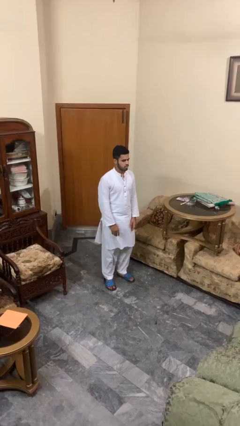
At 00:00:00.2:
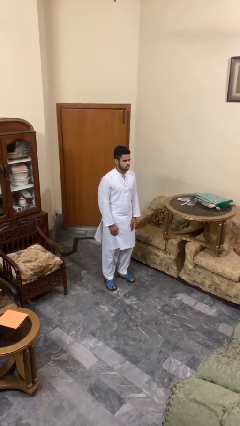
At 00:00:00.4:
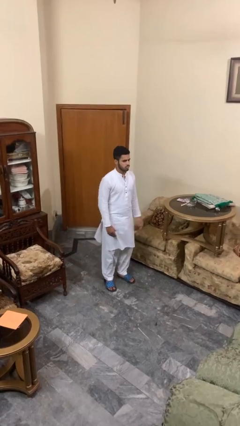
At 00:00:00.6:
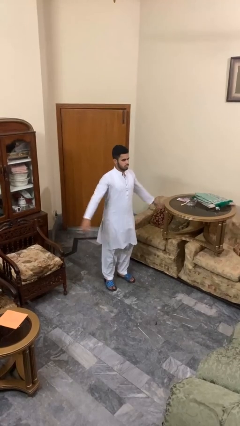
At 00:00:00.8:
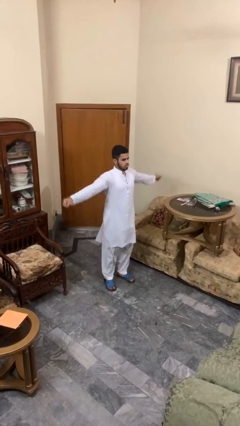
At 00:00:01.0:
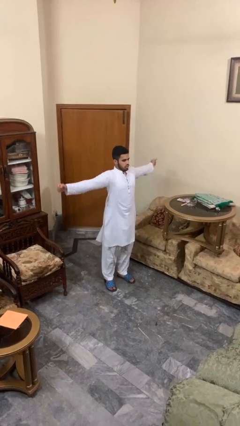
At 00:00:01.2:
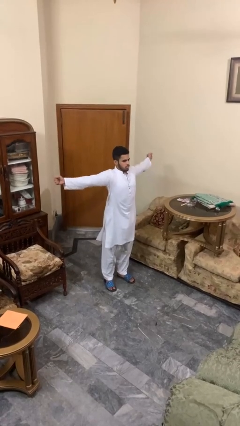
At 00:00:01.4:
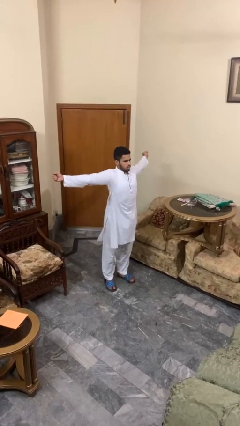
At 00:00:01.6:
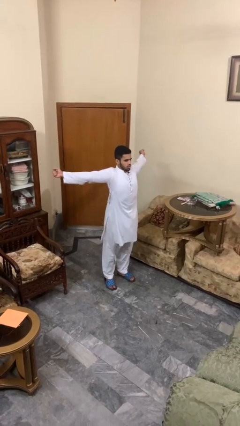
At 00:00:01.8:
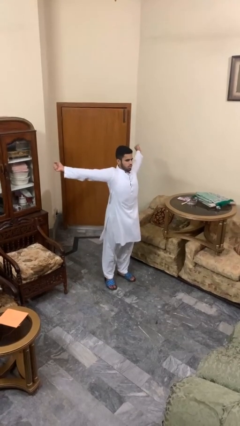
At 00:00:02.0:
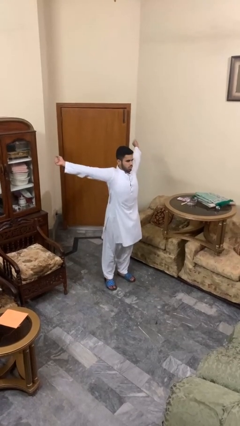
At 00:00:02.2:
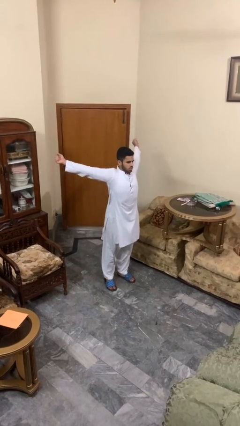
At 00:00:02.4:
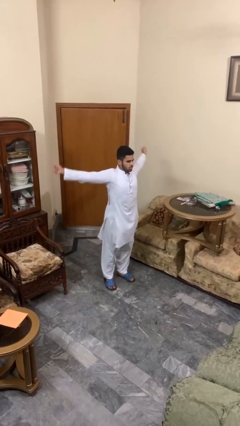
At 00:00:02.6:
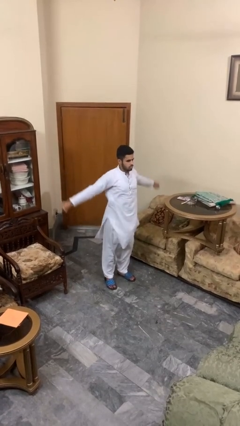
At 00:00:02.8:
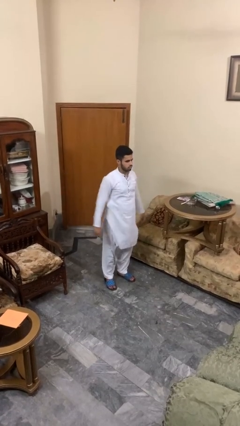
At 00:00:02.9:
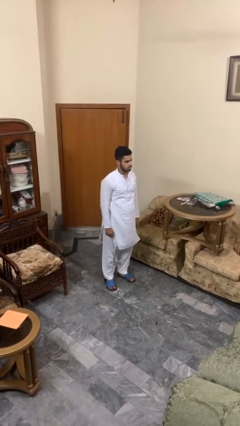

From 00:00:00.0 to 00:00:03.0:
person stretches arms to side

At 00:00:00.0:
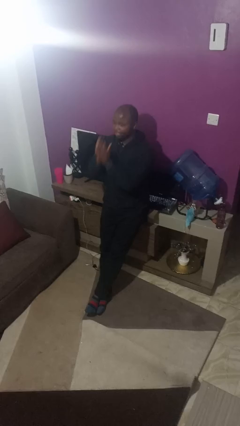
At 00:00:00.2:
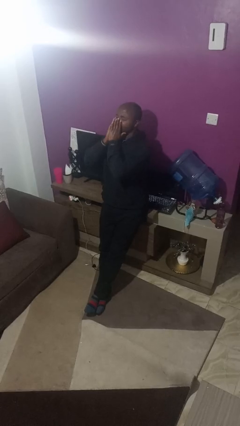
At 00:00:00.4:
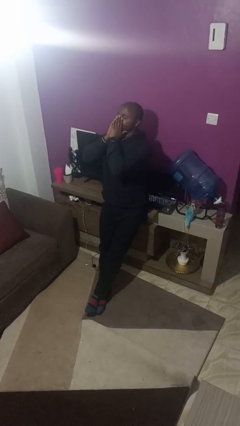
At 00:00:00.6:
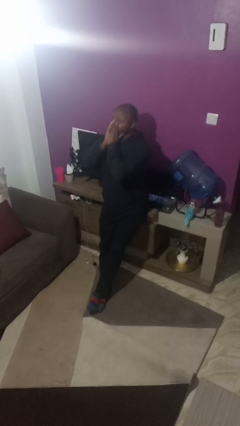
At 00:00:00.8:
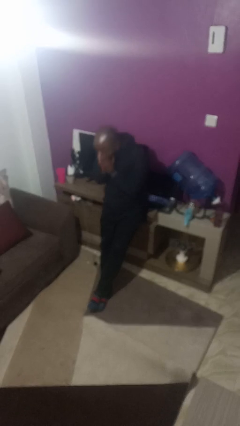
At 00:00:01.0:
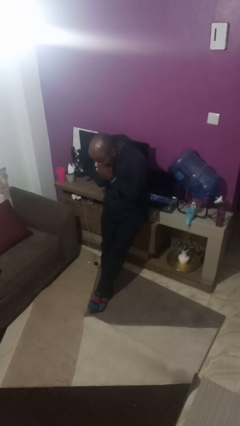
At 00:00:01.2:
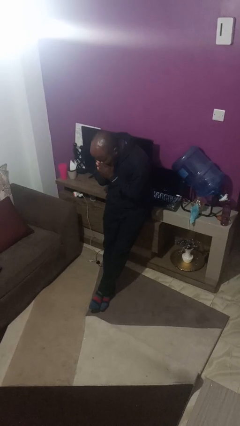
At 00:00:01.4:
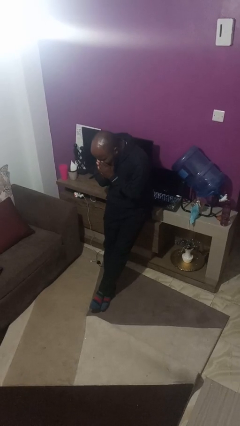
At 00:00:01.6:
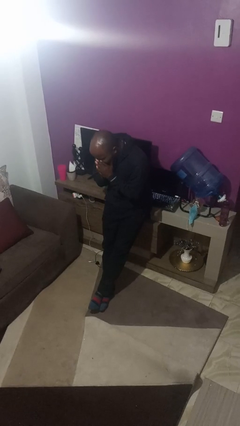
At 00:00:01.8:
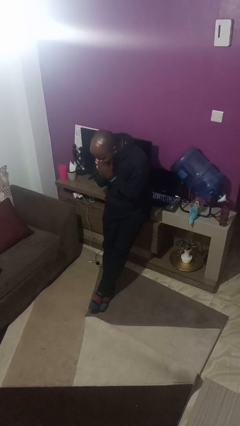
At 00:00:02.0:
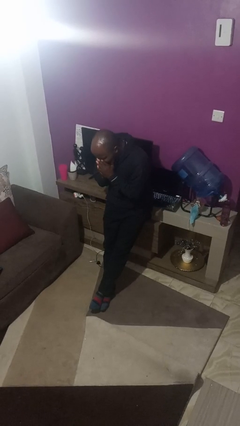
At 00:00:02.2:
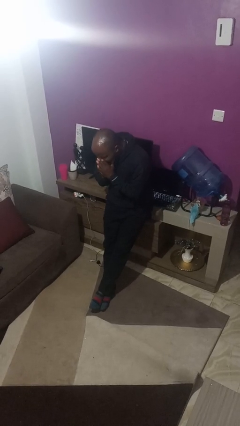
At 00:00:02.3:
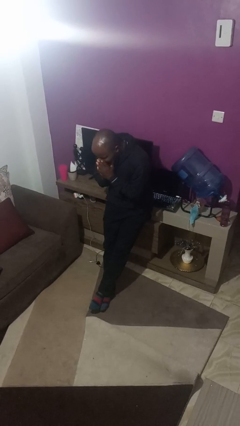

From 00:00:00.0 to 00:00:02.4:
person sneezes into hand

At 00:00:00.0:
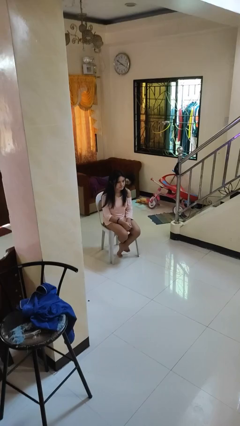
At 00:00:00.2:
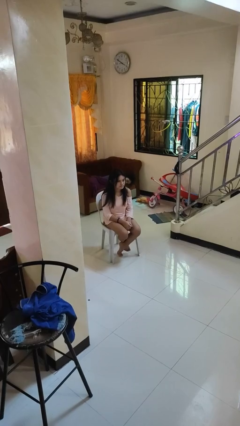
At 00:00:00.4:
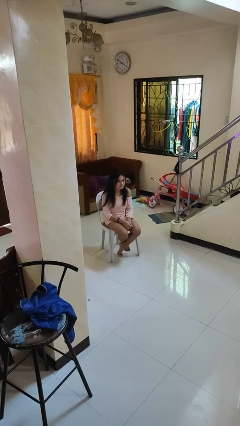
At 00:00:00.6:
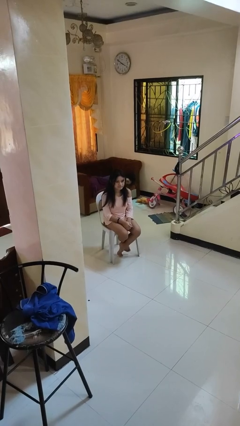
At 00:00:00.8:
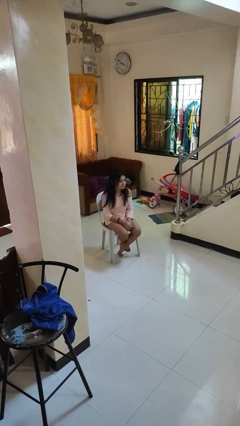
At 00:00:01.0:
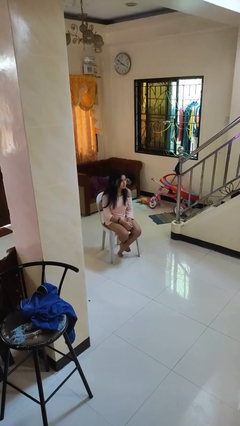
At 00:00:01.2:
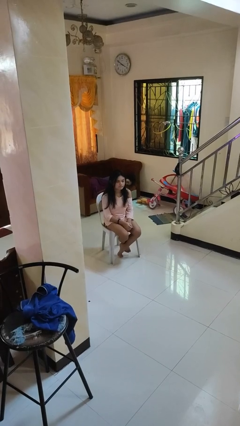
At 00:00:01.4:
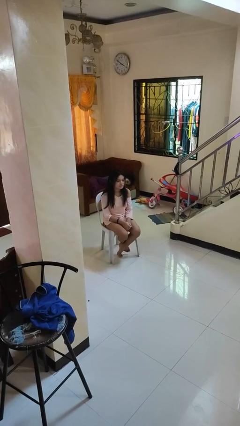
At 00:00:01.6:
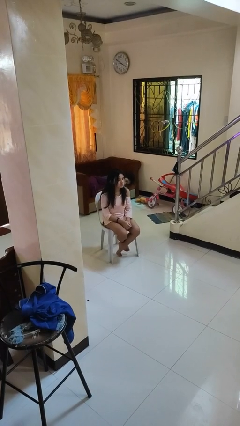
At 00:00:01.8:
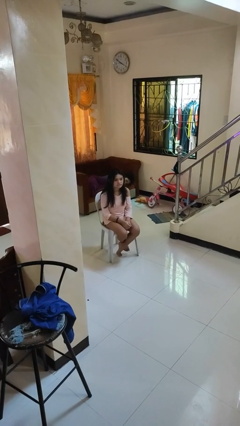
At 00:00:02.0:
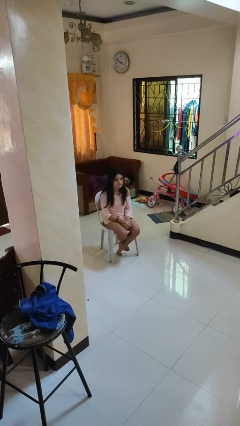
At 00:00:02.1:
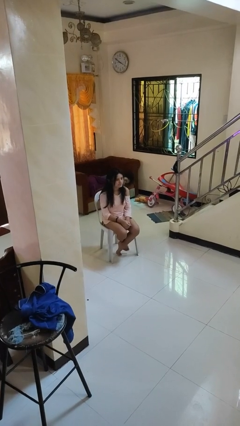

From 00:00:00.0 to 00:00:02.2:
person shakes head

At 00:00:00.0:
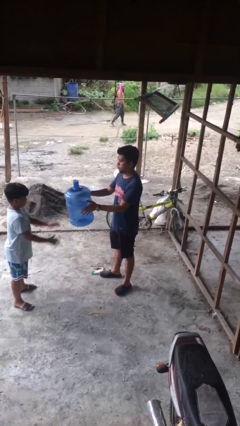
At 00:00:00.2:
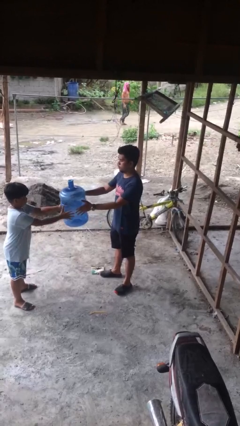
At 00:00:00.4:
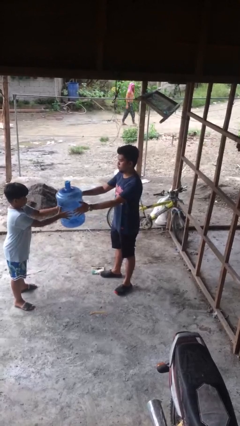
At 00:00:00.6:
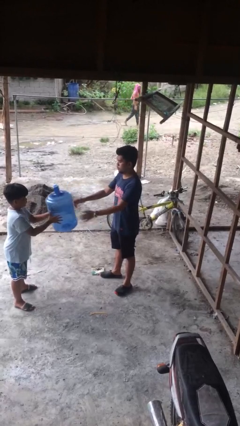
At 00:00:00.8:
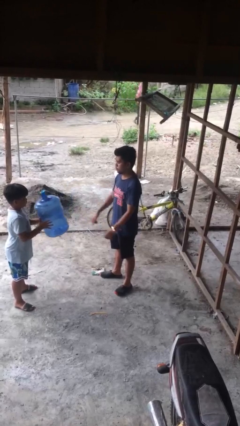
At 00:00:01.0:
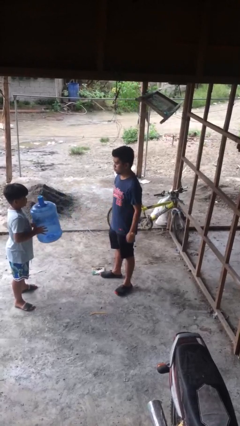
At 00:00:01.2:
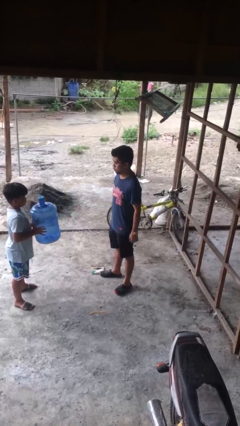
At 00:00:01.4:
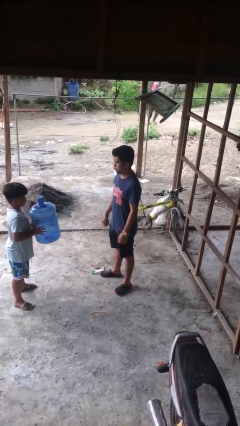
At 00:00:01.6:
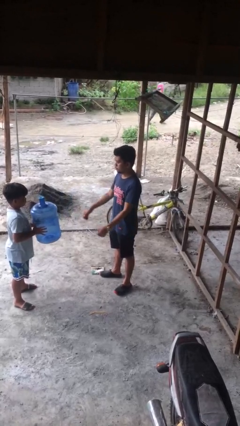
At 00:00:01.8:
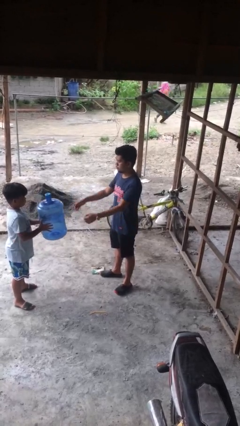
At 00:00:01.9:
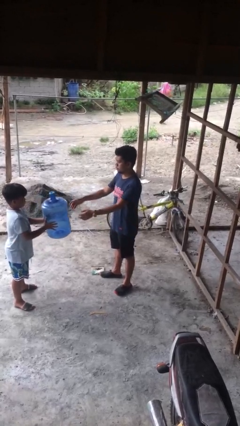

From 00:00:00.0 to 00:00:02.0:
person transfers object to person

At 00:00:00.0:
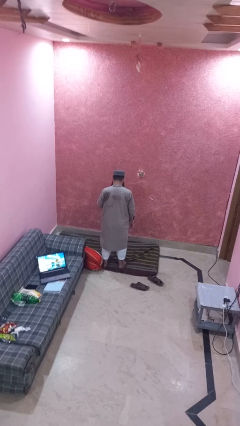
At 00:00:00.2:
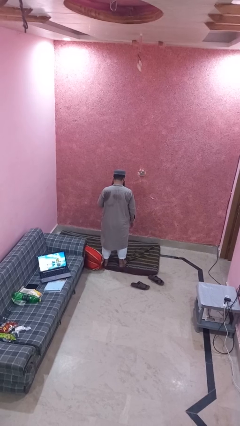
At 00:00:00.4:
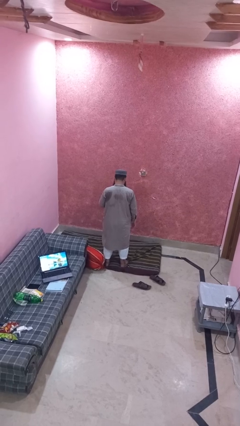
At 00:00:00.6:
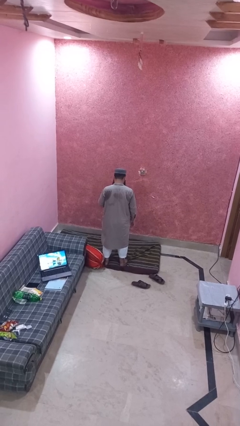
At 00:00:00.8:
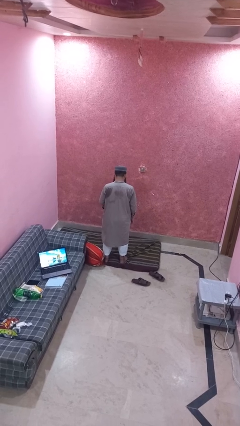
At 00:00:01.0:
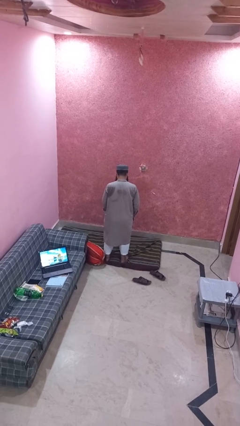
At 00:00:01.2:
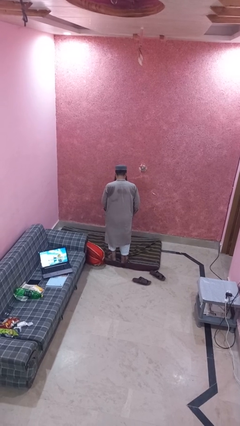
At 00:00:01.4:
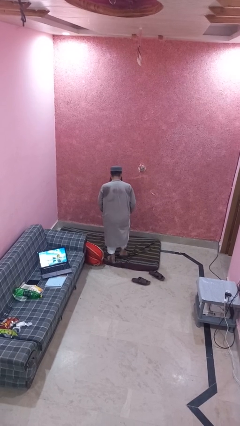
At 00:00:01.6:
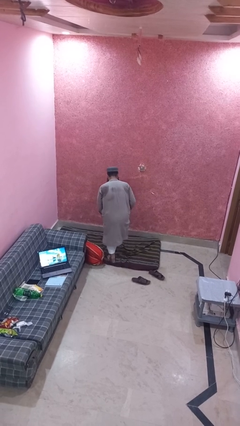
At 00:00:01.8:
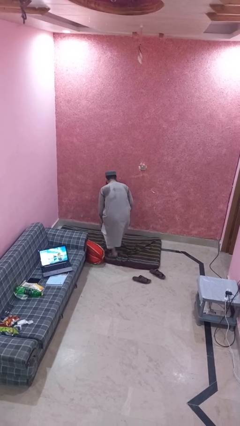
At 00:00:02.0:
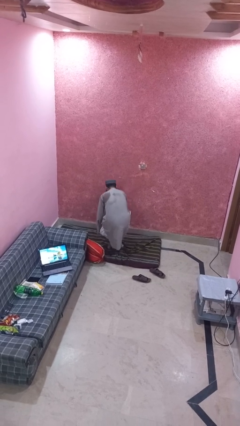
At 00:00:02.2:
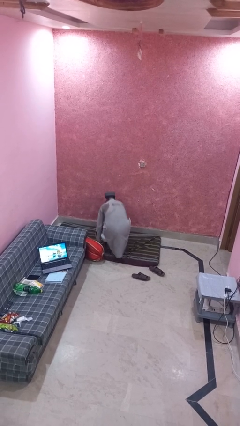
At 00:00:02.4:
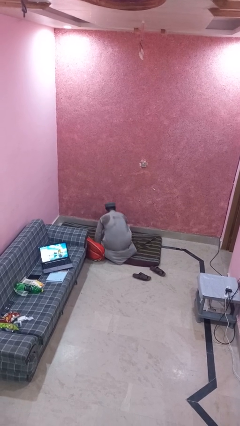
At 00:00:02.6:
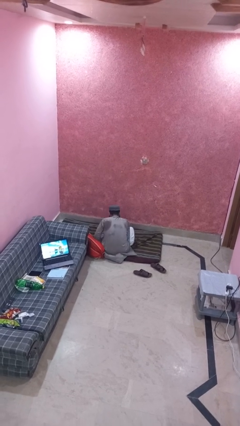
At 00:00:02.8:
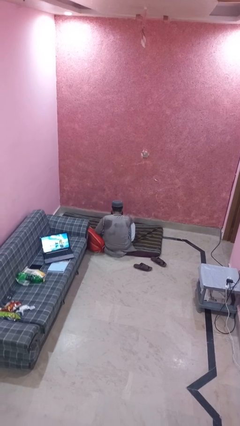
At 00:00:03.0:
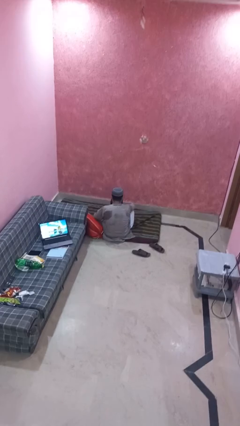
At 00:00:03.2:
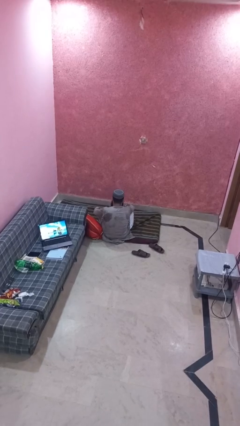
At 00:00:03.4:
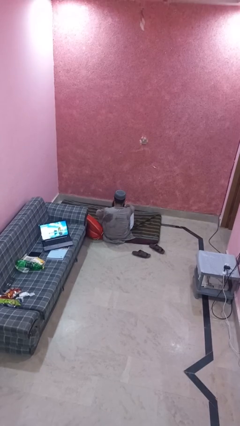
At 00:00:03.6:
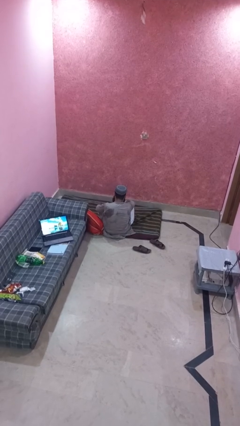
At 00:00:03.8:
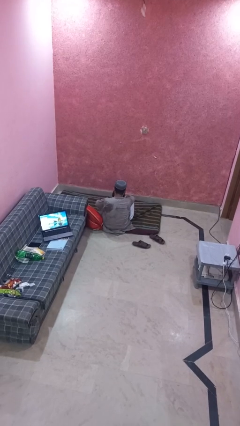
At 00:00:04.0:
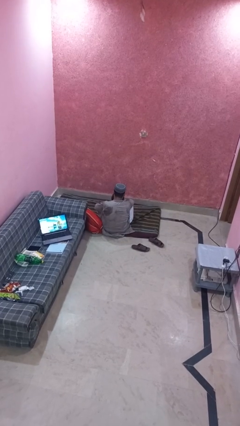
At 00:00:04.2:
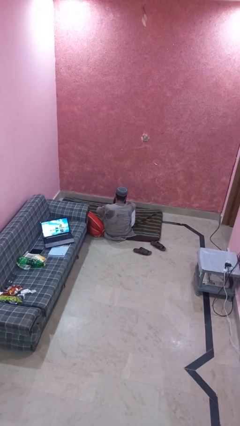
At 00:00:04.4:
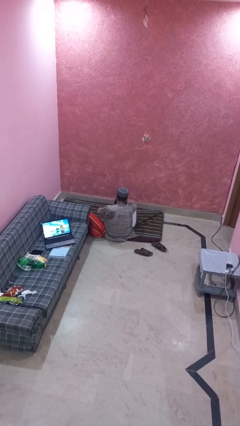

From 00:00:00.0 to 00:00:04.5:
person sits crisscross

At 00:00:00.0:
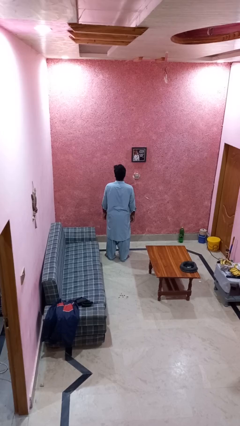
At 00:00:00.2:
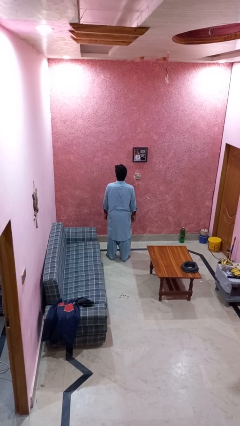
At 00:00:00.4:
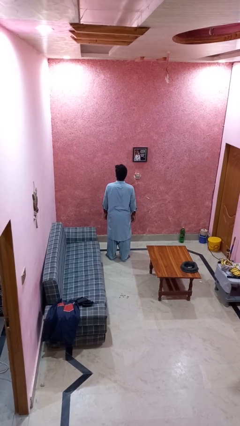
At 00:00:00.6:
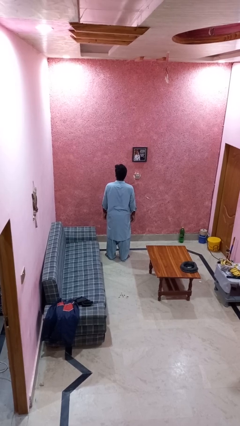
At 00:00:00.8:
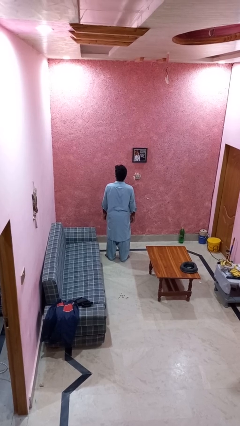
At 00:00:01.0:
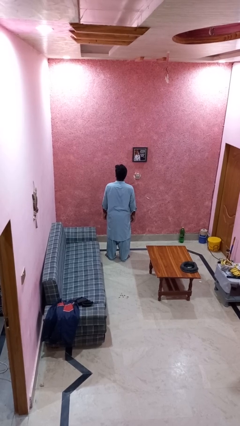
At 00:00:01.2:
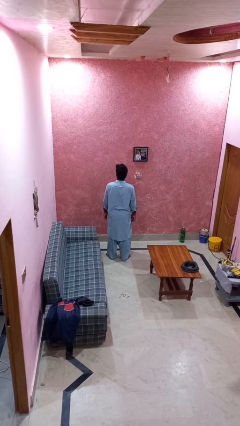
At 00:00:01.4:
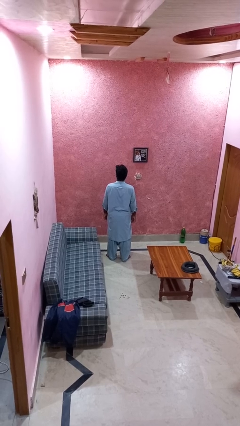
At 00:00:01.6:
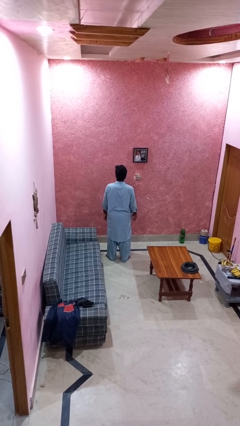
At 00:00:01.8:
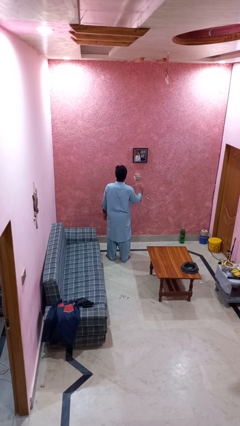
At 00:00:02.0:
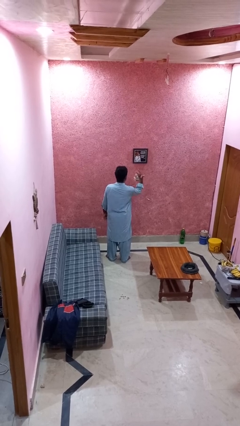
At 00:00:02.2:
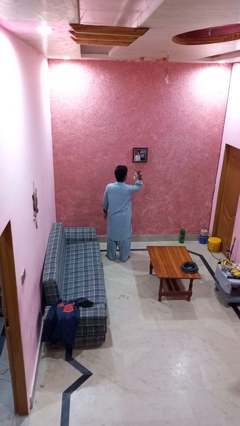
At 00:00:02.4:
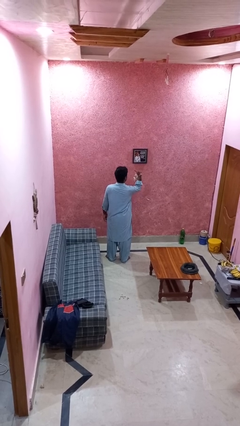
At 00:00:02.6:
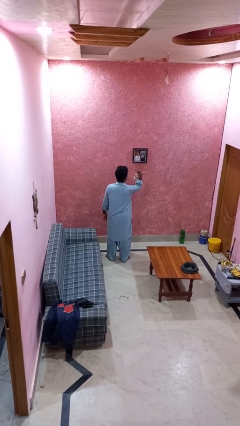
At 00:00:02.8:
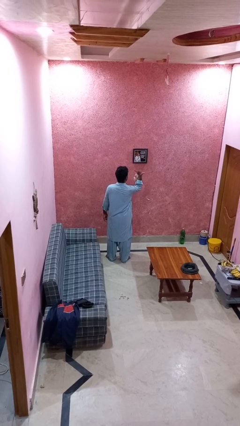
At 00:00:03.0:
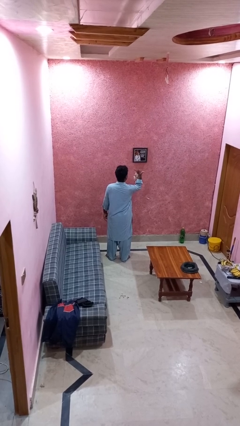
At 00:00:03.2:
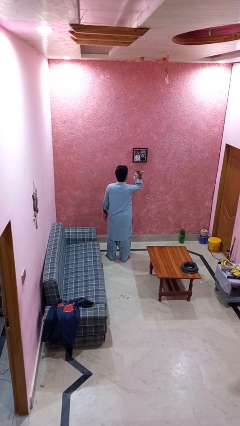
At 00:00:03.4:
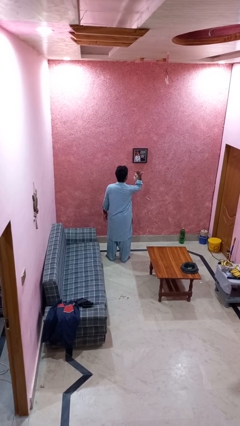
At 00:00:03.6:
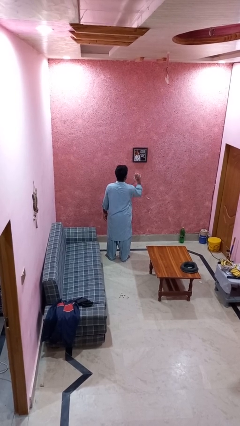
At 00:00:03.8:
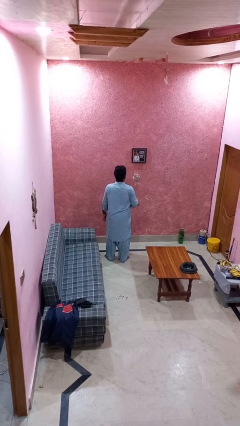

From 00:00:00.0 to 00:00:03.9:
person gestures hang loose
